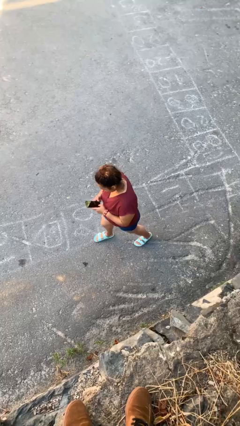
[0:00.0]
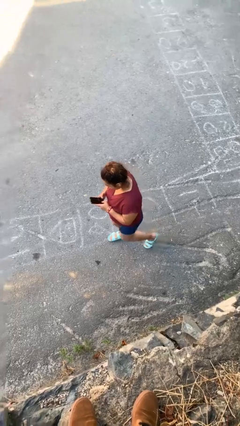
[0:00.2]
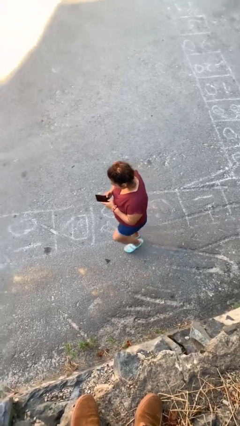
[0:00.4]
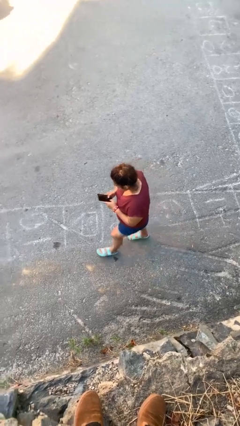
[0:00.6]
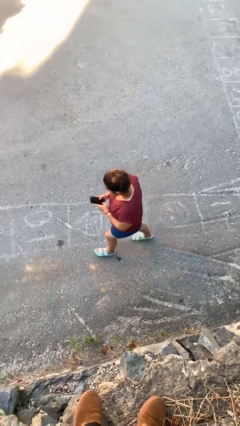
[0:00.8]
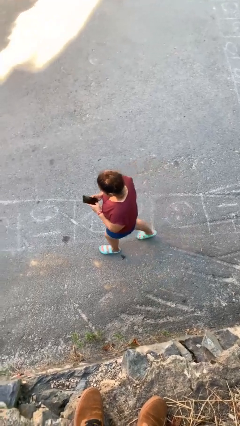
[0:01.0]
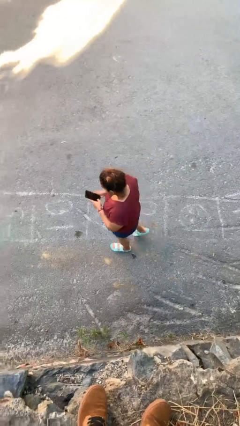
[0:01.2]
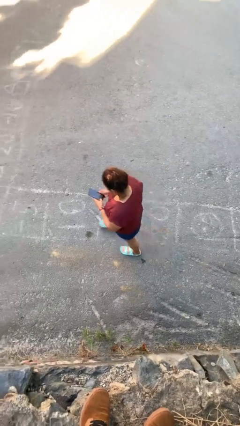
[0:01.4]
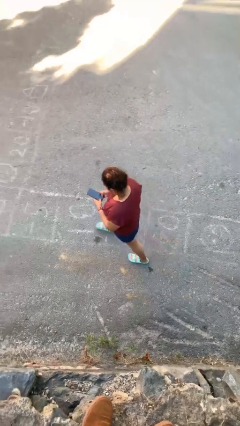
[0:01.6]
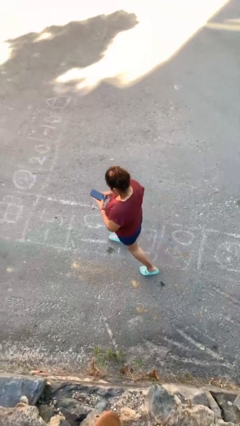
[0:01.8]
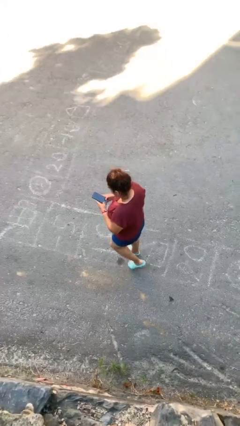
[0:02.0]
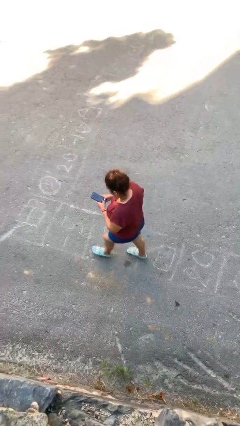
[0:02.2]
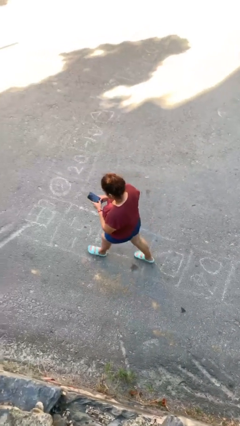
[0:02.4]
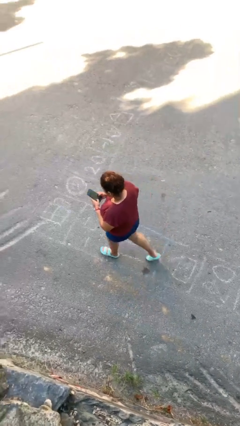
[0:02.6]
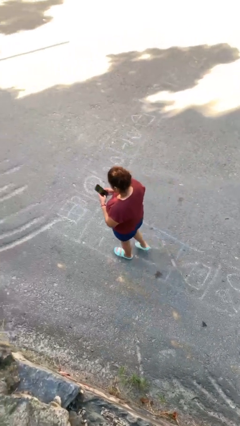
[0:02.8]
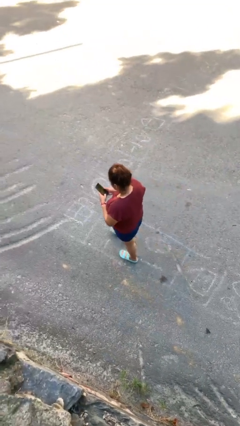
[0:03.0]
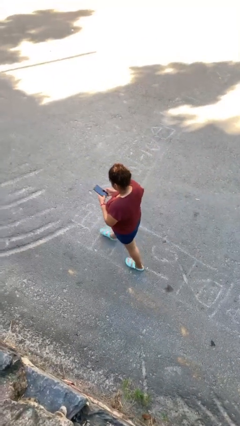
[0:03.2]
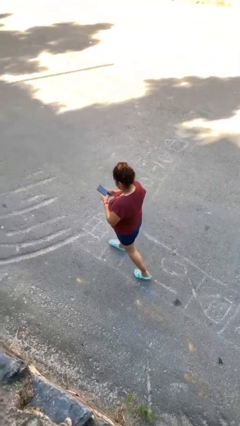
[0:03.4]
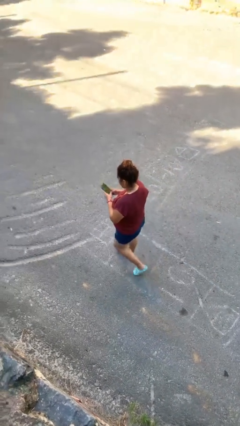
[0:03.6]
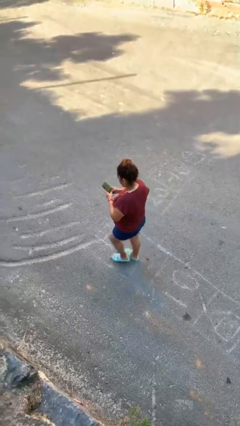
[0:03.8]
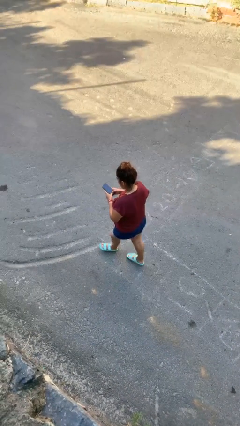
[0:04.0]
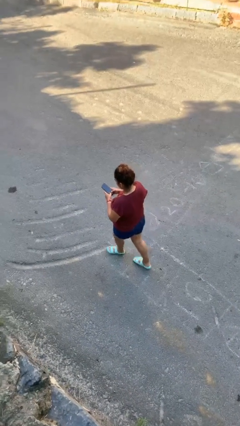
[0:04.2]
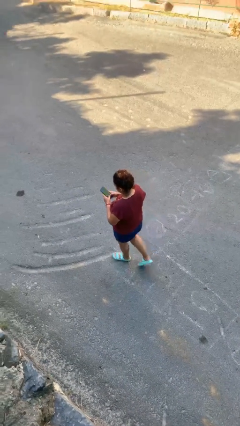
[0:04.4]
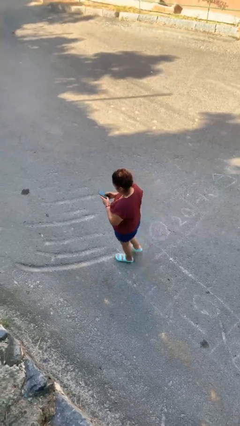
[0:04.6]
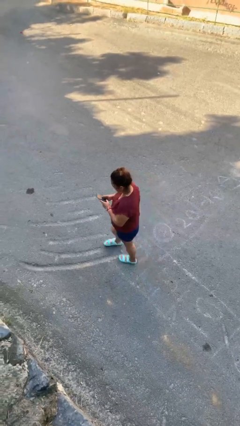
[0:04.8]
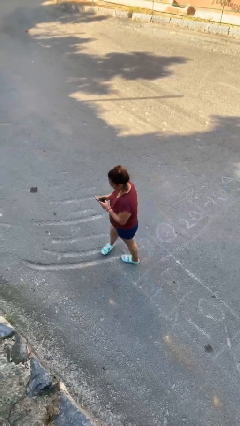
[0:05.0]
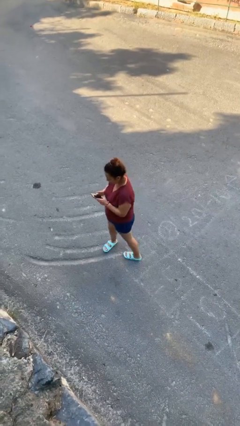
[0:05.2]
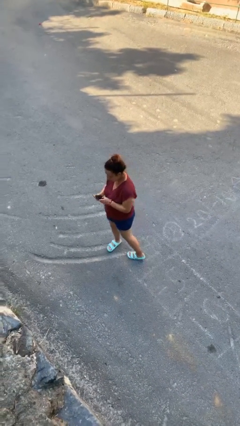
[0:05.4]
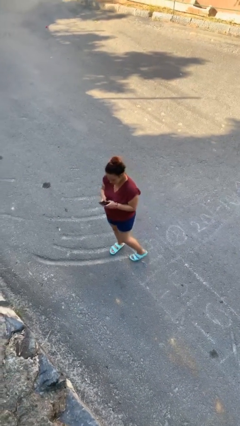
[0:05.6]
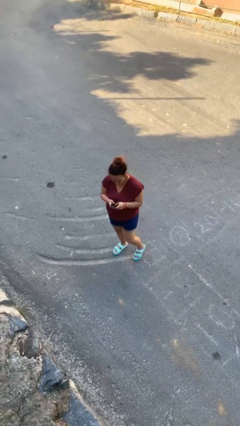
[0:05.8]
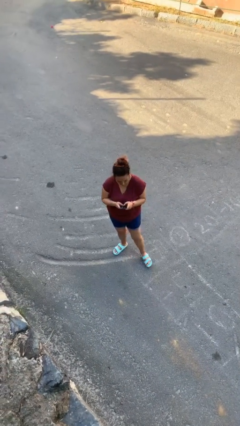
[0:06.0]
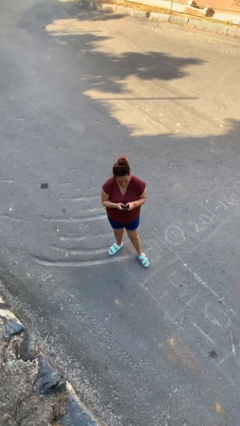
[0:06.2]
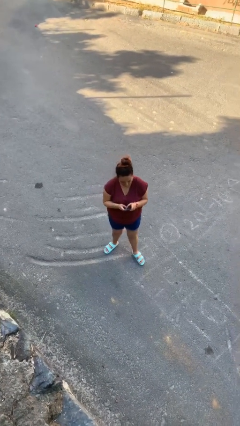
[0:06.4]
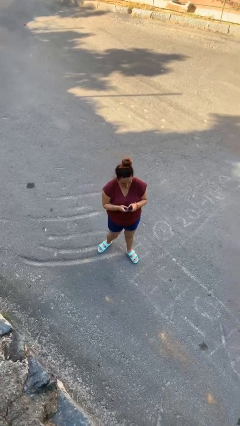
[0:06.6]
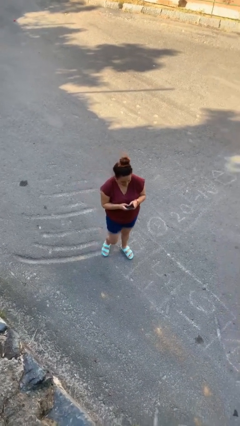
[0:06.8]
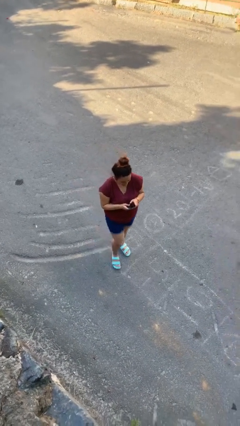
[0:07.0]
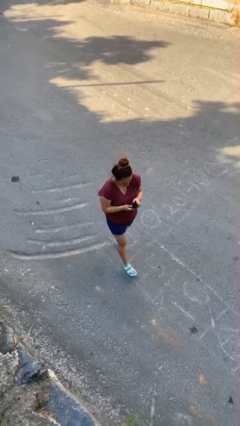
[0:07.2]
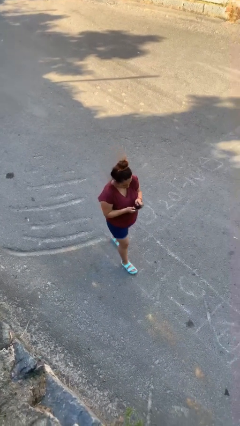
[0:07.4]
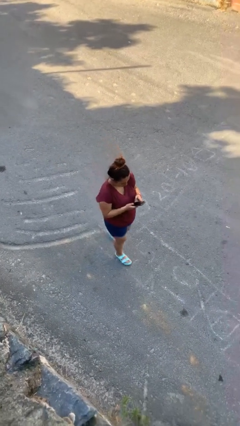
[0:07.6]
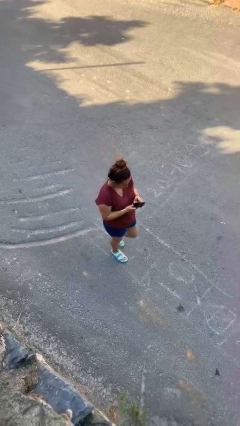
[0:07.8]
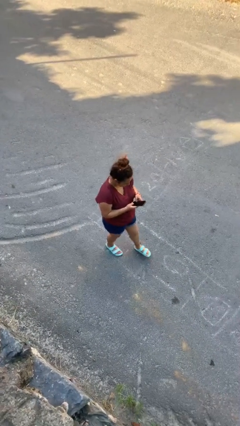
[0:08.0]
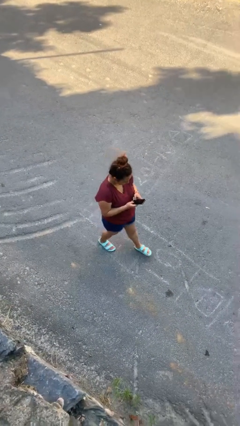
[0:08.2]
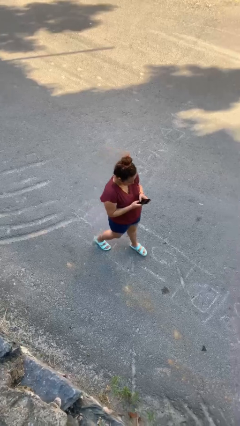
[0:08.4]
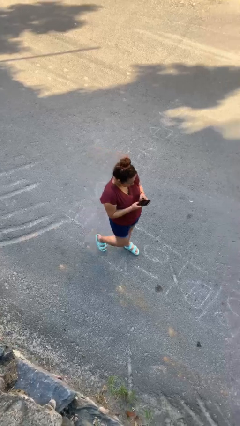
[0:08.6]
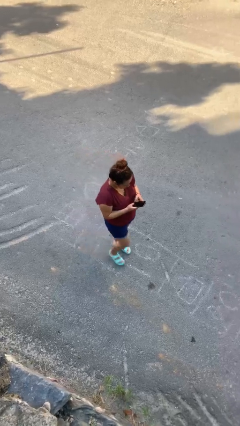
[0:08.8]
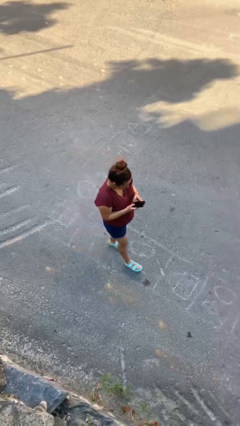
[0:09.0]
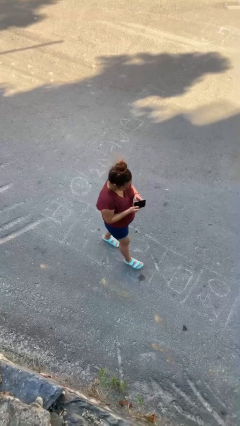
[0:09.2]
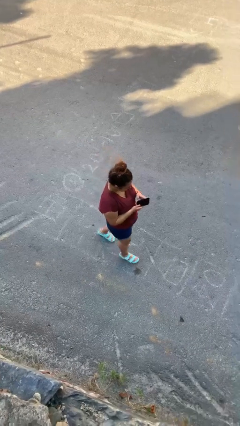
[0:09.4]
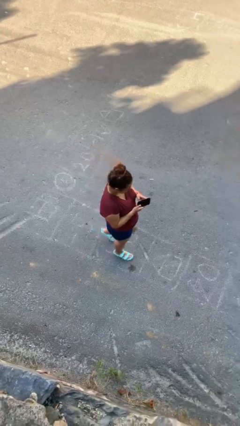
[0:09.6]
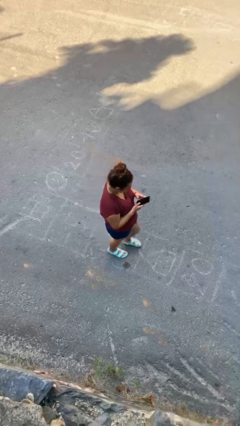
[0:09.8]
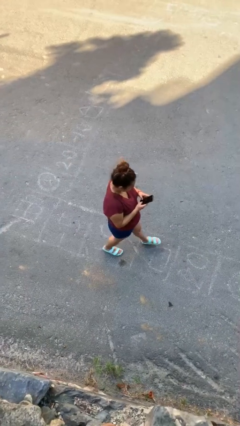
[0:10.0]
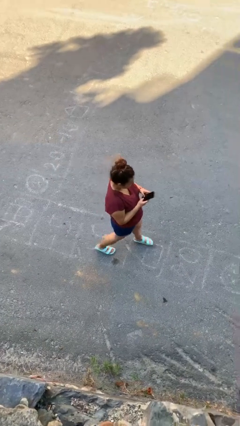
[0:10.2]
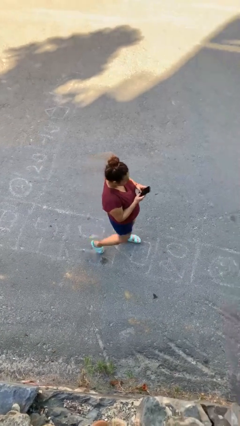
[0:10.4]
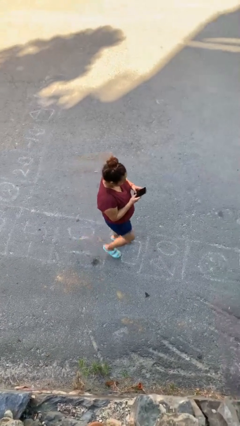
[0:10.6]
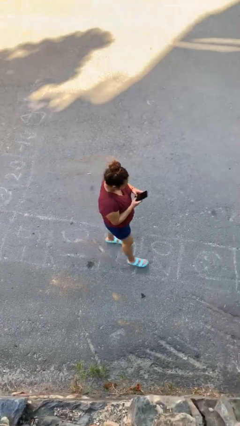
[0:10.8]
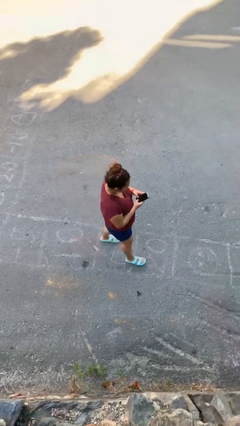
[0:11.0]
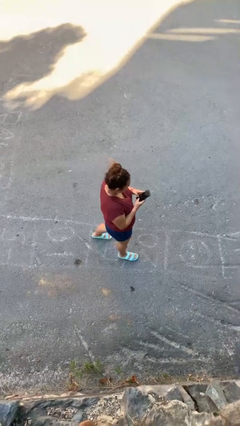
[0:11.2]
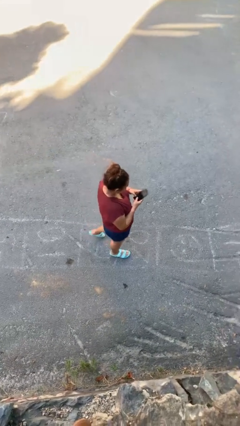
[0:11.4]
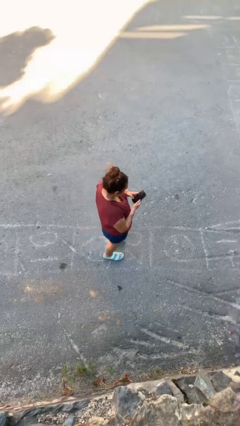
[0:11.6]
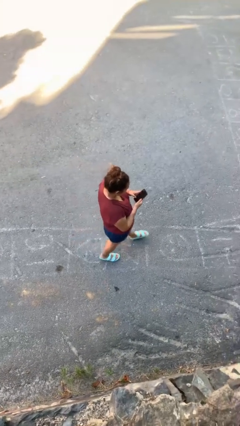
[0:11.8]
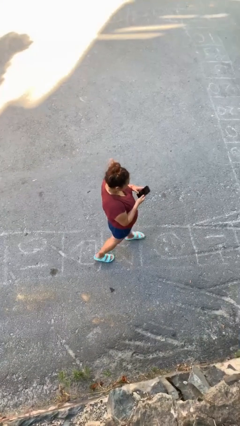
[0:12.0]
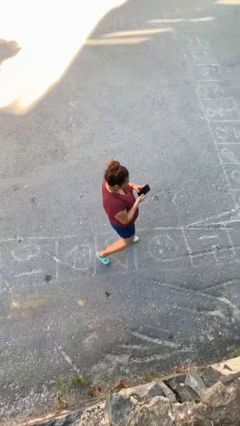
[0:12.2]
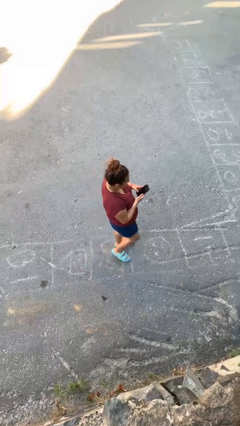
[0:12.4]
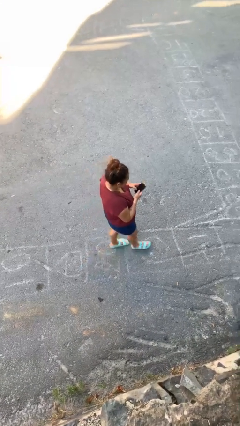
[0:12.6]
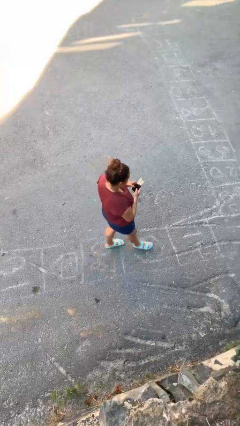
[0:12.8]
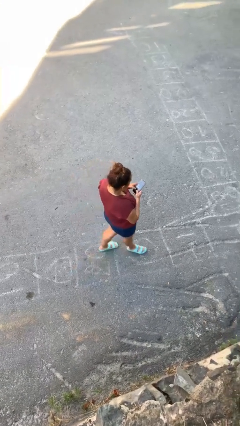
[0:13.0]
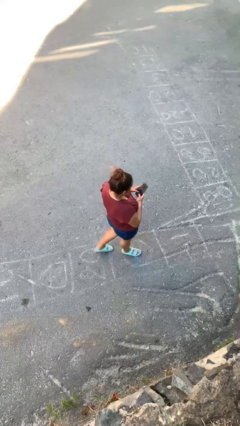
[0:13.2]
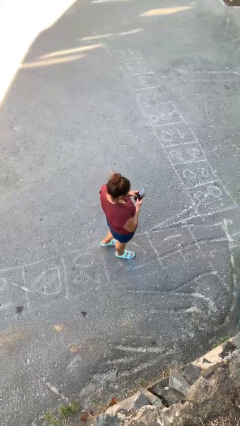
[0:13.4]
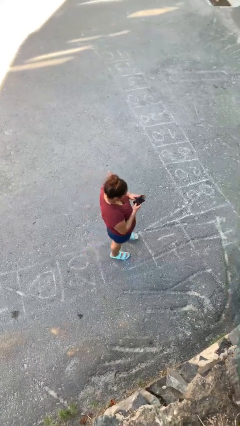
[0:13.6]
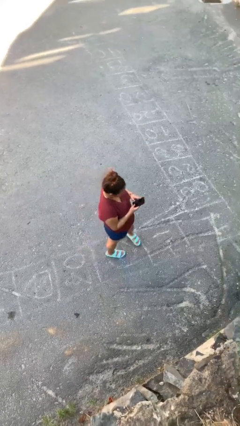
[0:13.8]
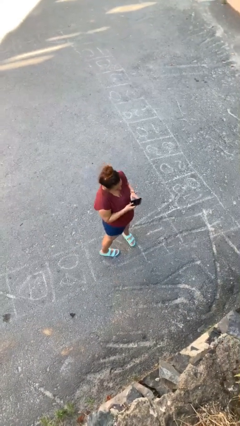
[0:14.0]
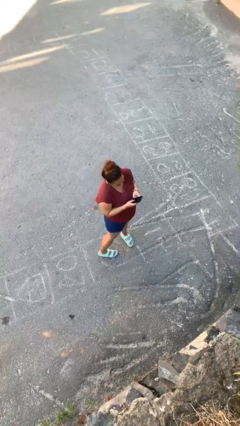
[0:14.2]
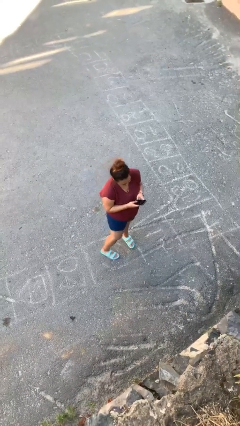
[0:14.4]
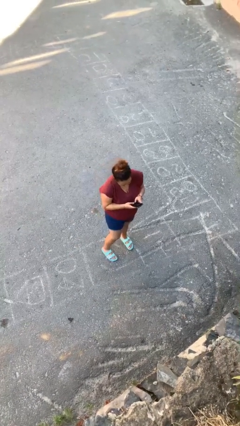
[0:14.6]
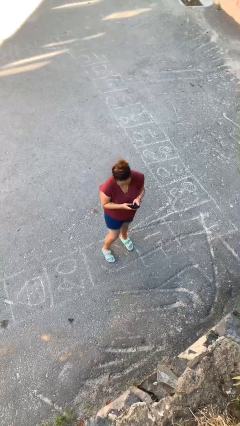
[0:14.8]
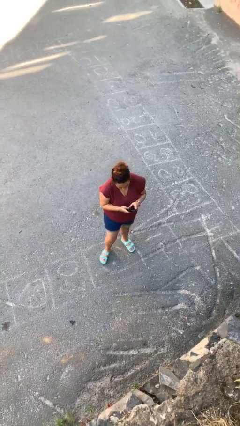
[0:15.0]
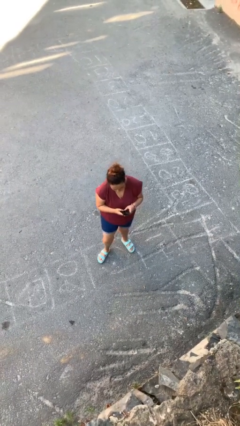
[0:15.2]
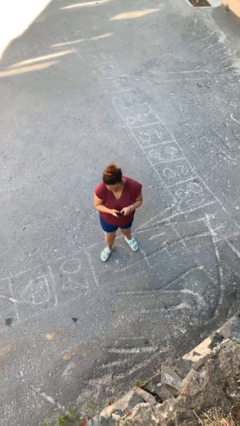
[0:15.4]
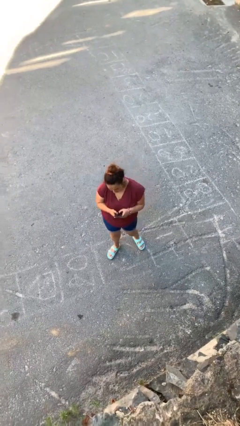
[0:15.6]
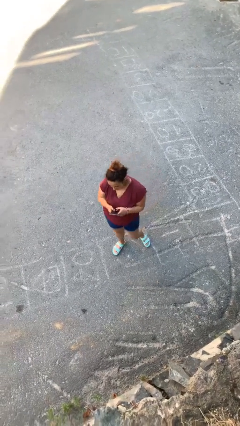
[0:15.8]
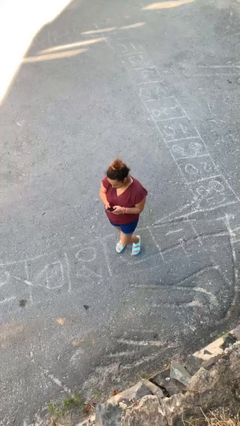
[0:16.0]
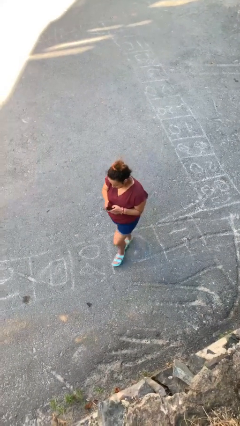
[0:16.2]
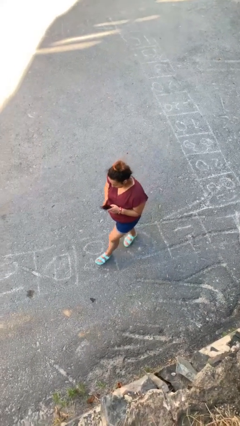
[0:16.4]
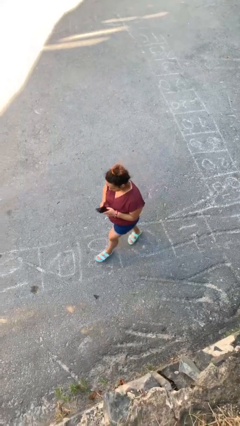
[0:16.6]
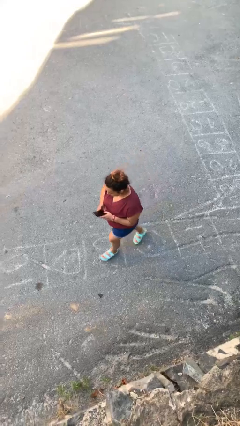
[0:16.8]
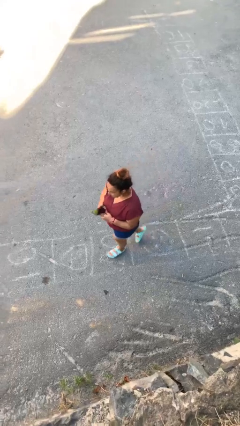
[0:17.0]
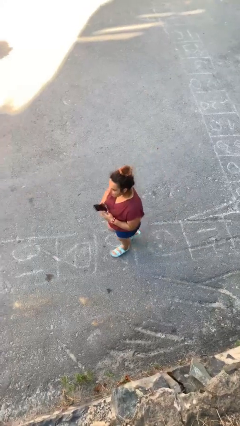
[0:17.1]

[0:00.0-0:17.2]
person texts on phone

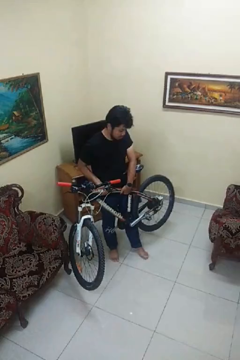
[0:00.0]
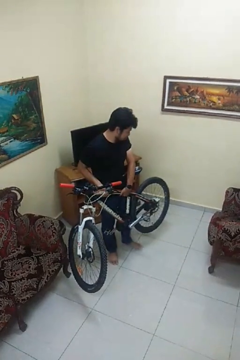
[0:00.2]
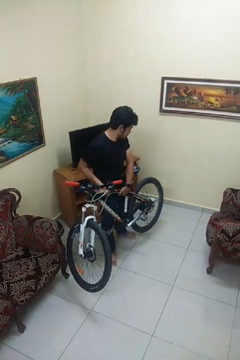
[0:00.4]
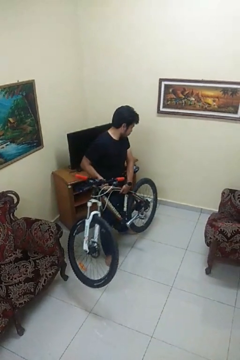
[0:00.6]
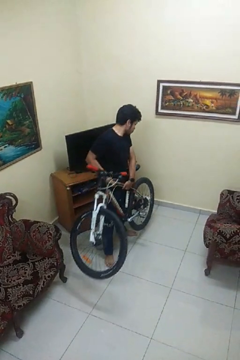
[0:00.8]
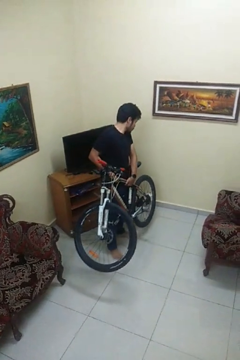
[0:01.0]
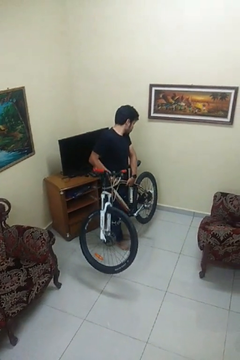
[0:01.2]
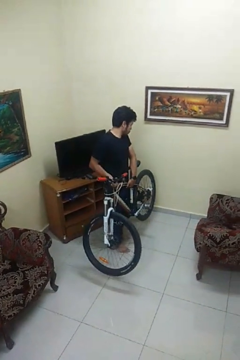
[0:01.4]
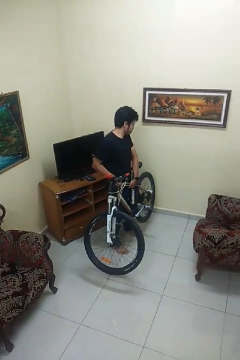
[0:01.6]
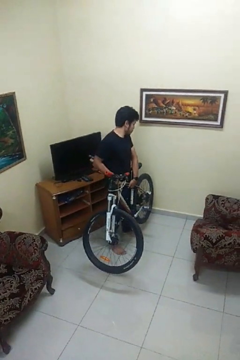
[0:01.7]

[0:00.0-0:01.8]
person carries bicycle
